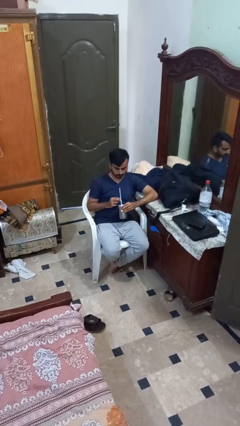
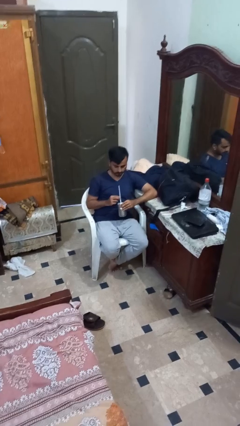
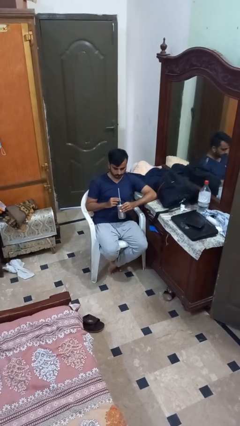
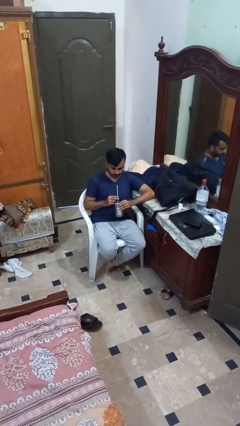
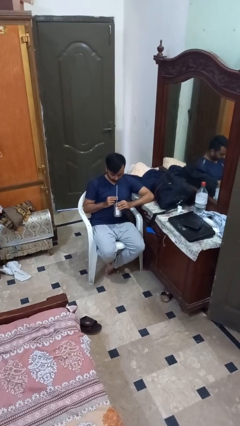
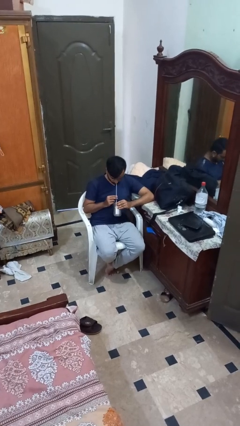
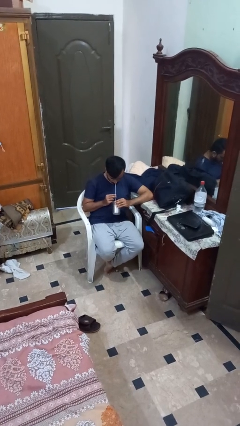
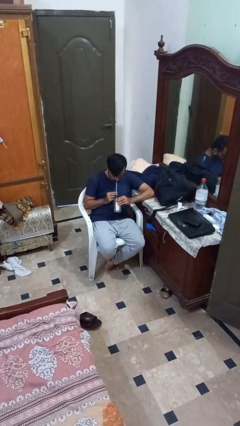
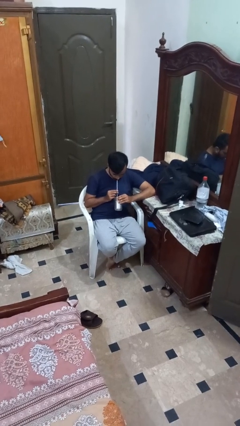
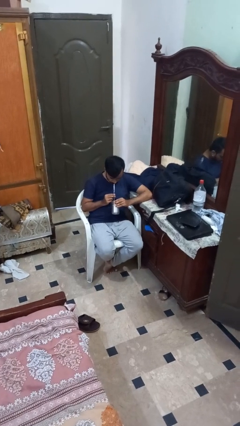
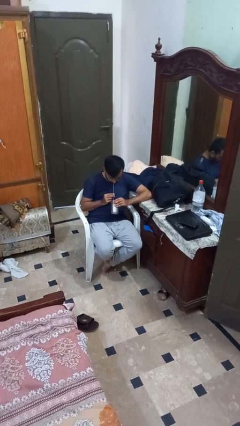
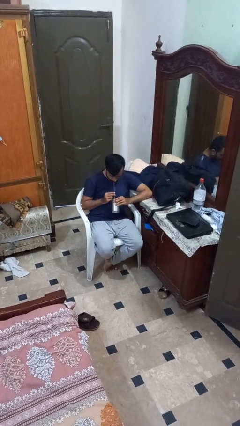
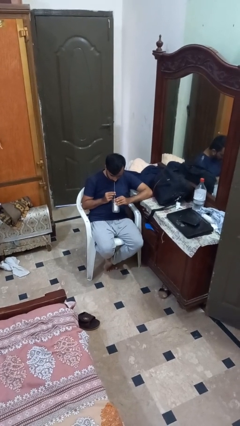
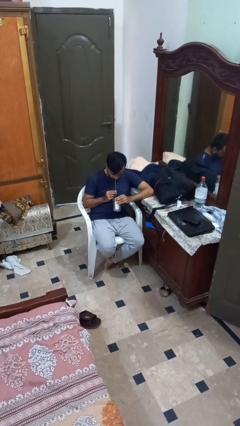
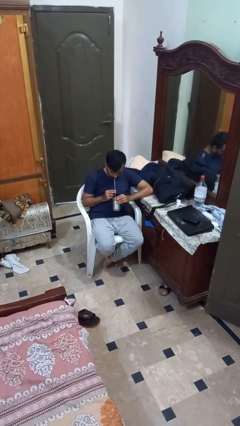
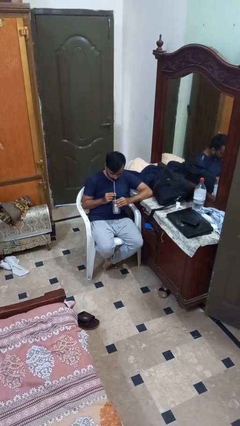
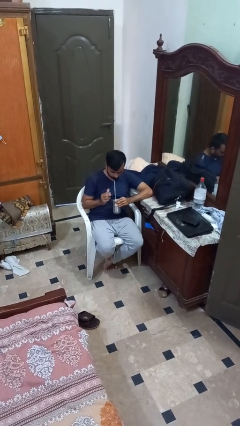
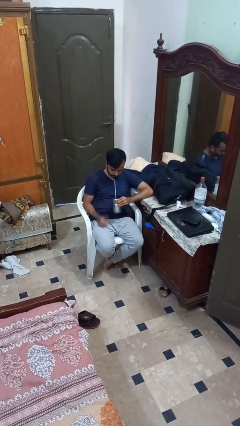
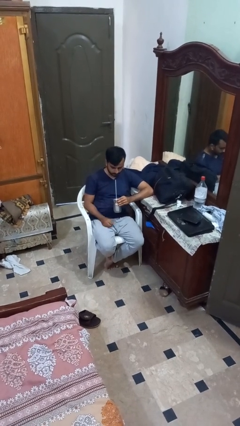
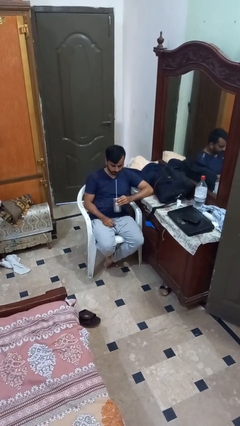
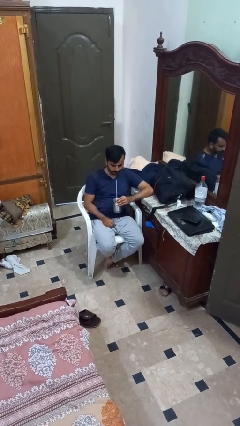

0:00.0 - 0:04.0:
person drinks from straw

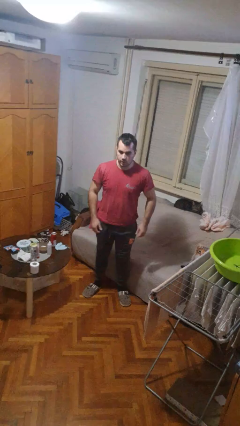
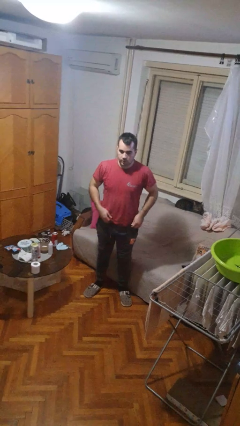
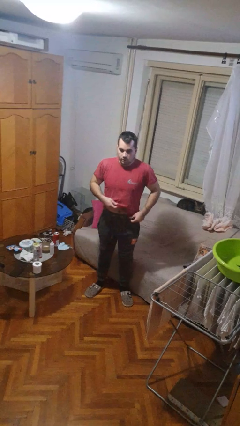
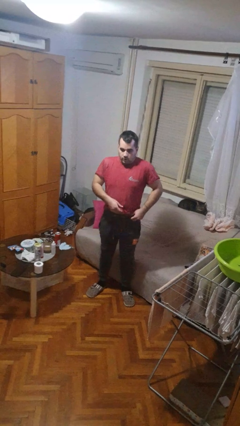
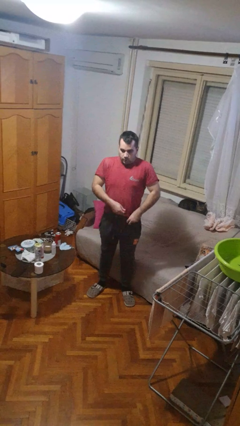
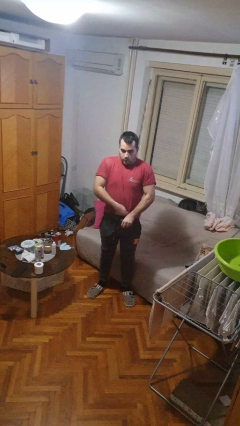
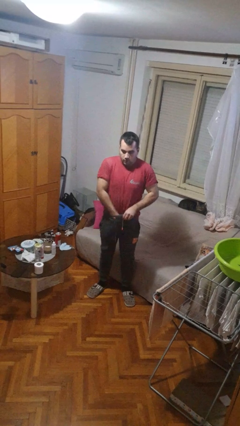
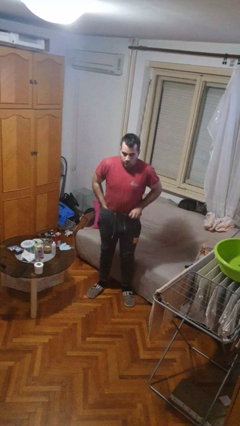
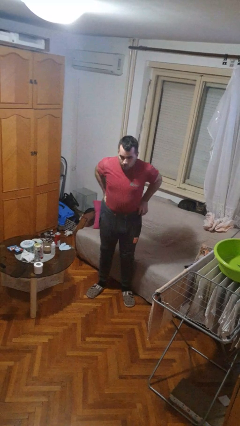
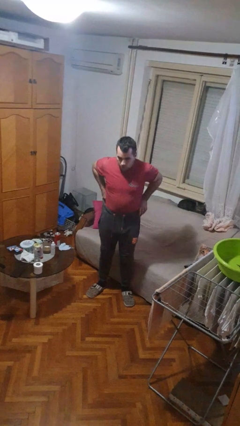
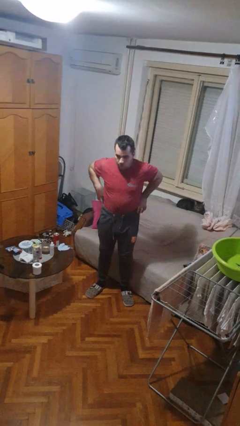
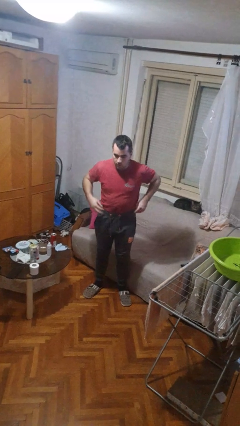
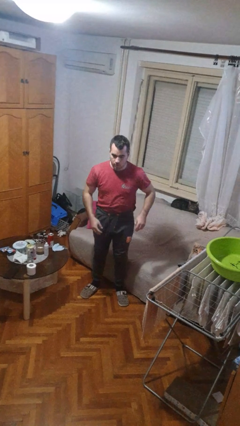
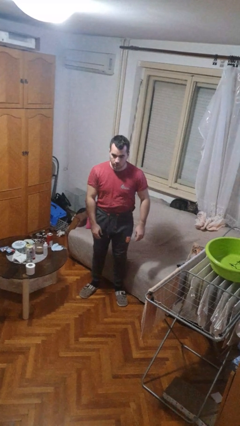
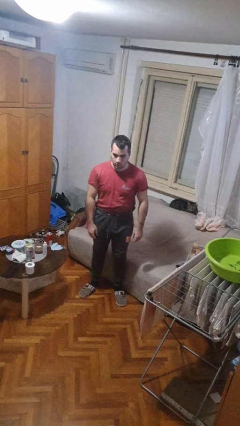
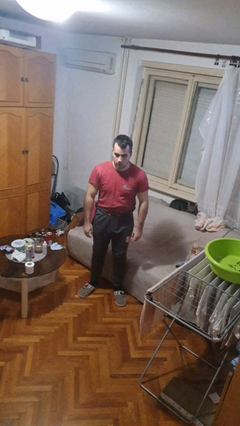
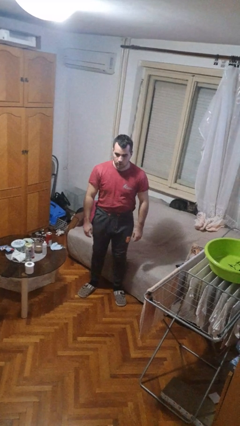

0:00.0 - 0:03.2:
person tucks in shirt

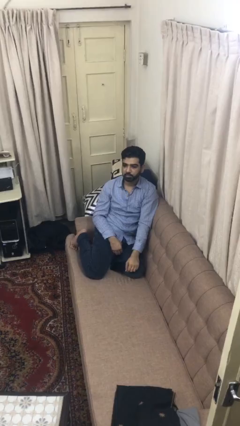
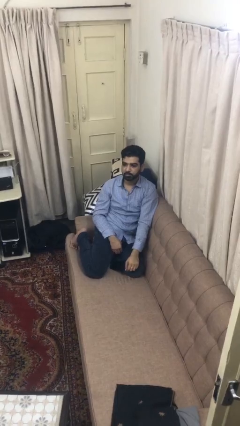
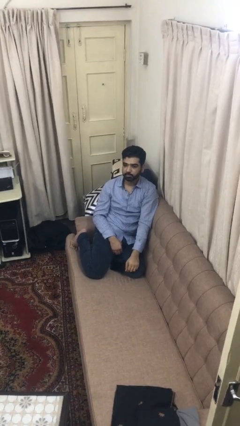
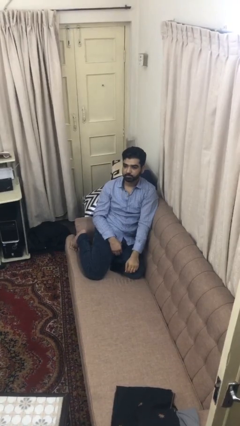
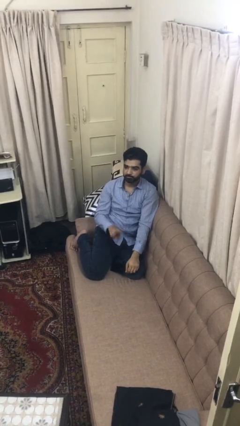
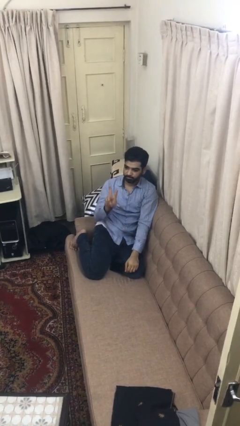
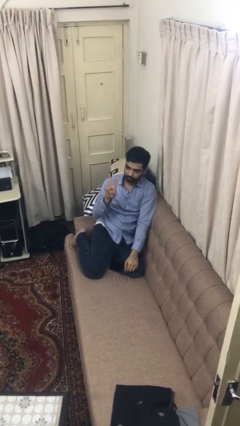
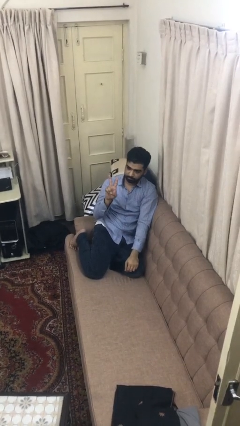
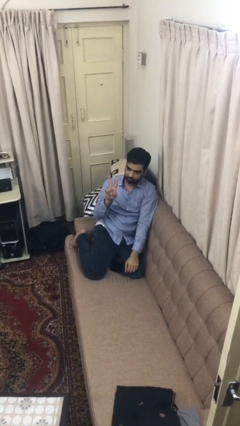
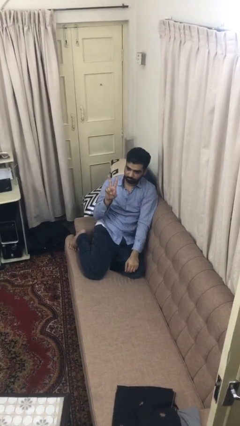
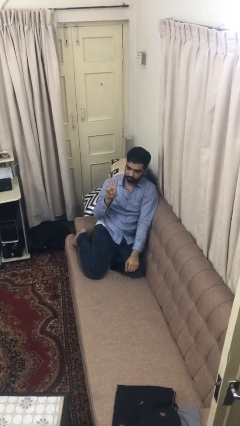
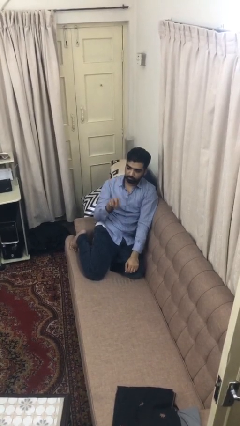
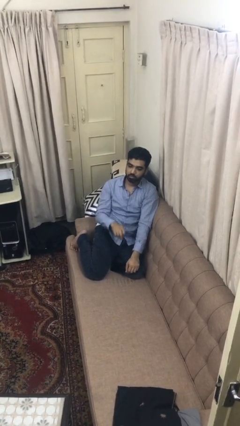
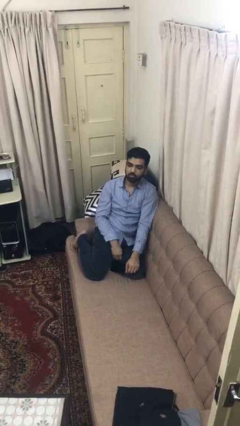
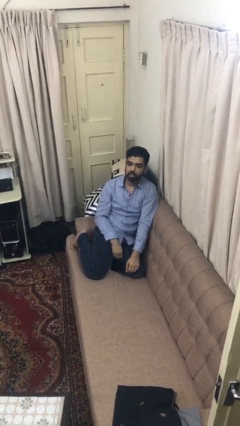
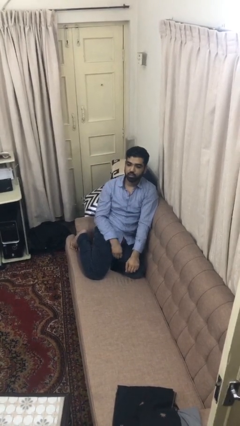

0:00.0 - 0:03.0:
person gestures peace

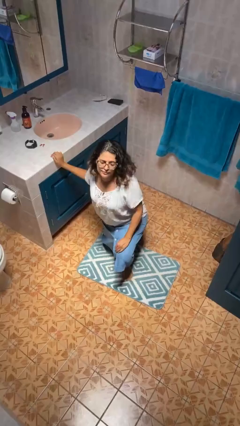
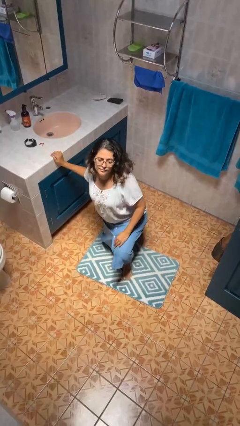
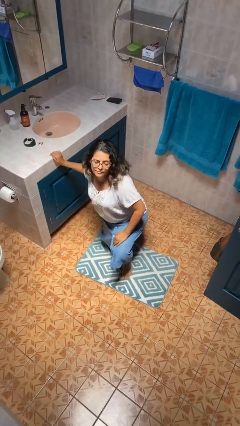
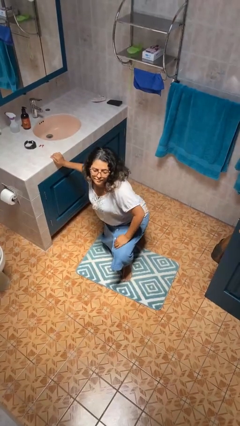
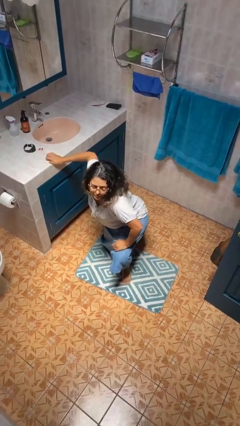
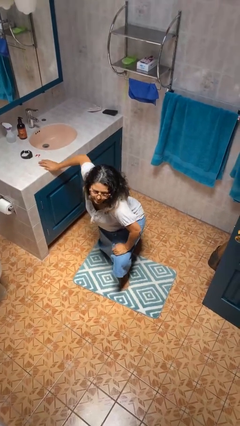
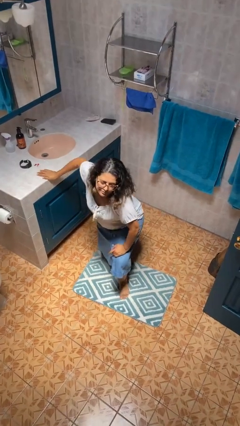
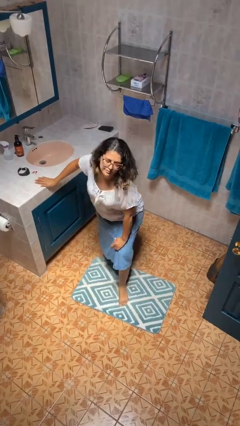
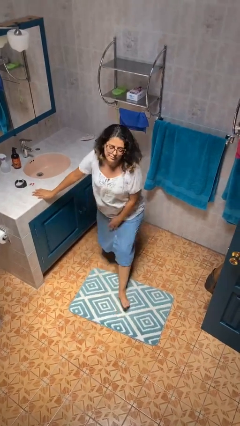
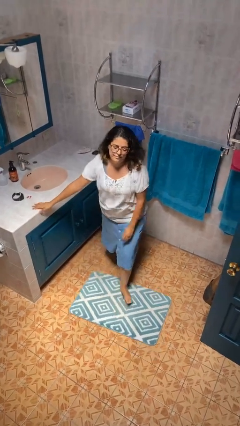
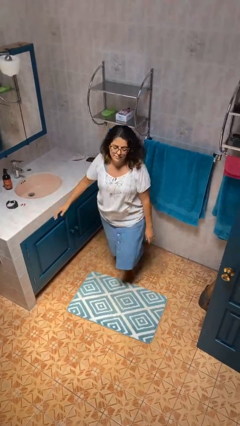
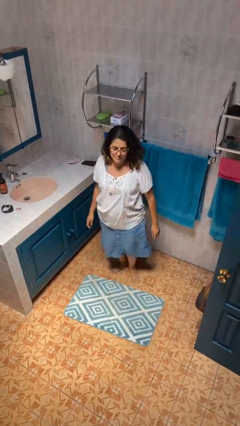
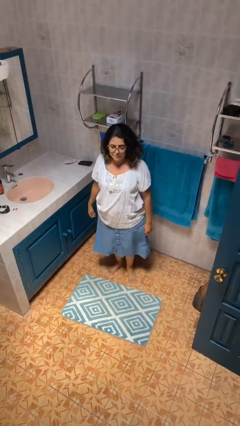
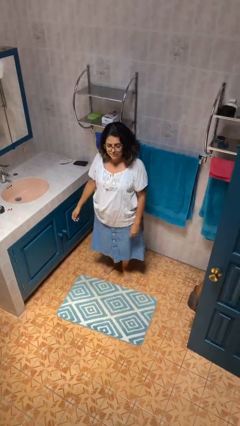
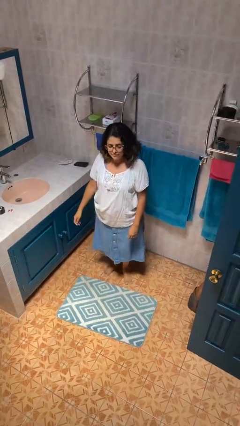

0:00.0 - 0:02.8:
person stands up from floor

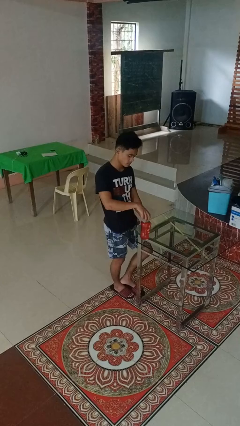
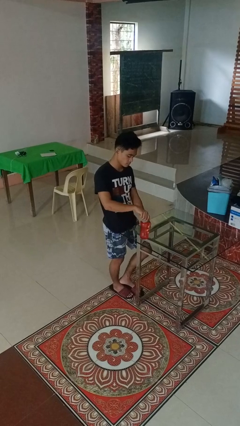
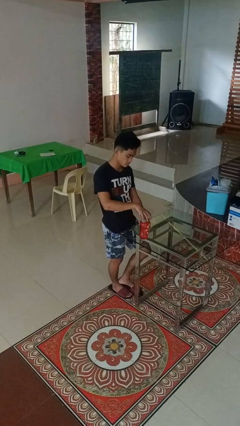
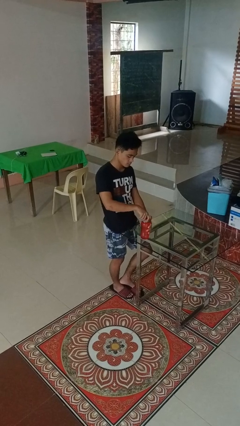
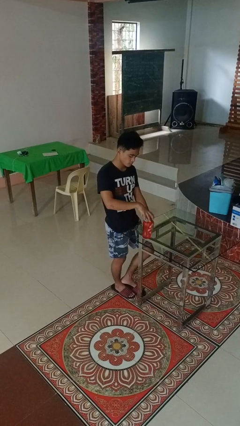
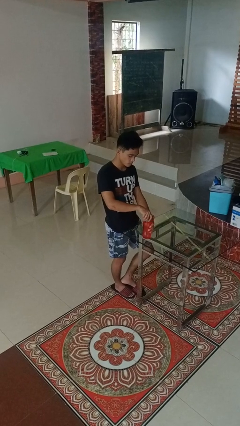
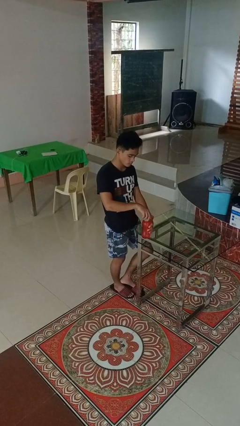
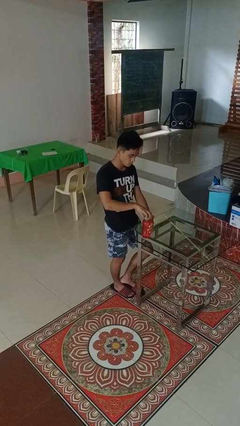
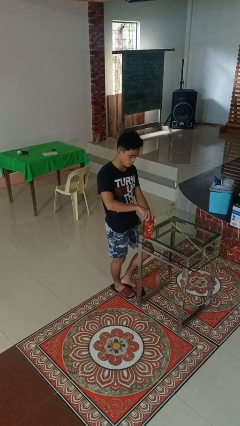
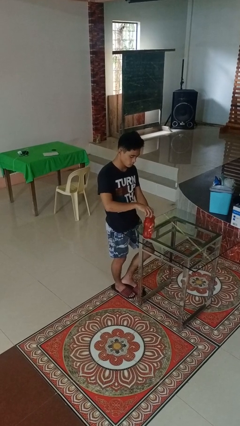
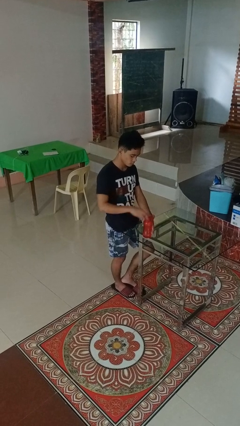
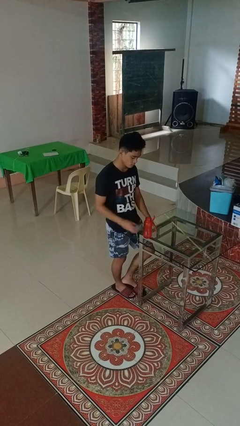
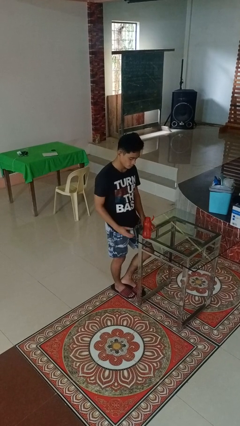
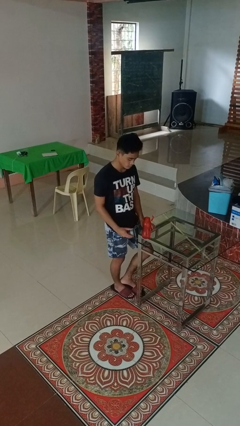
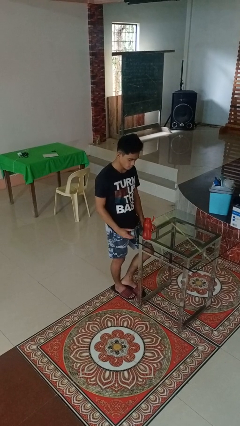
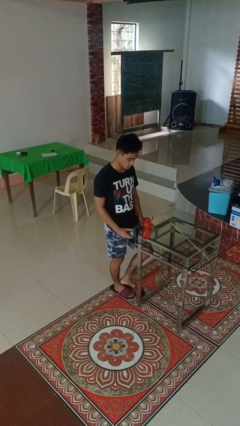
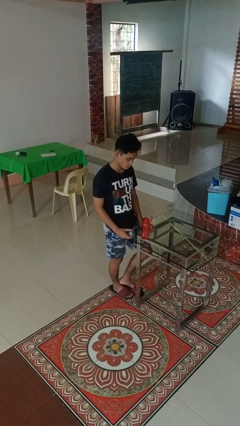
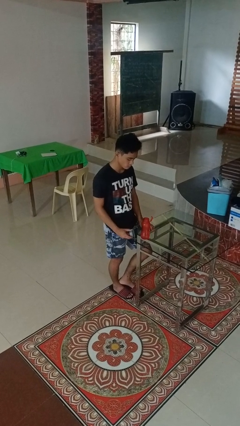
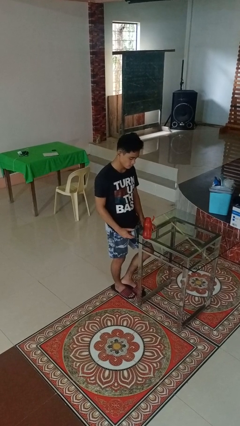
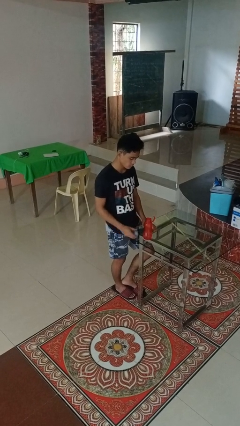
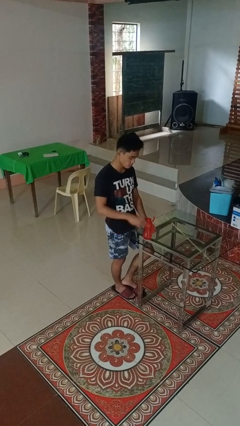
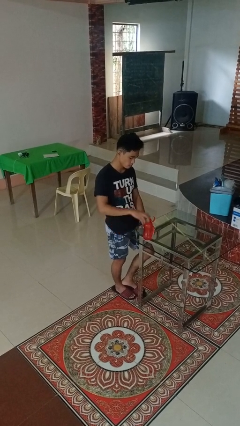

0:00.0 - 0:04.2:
person unscrews lid from bottle

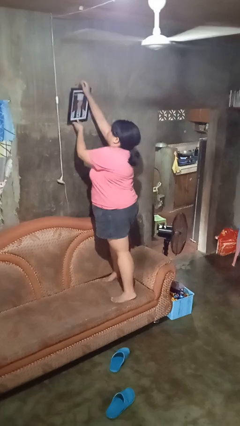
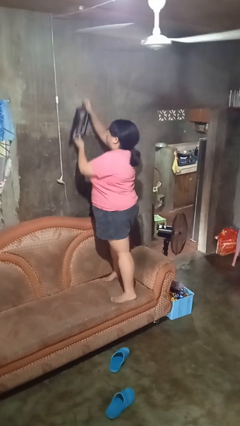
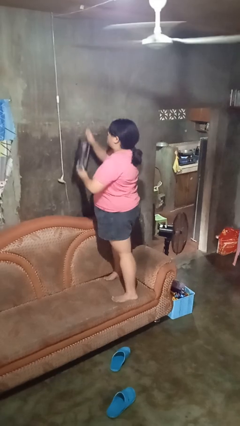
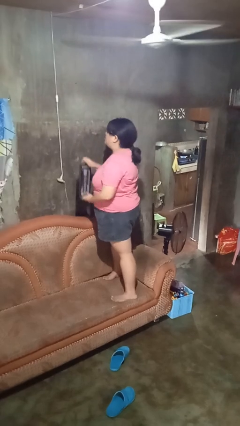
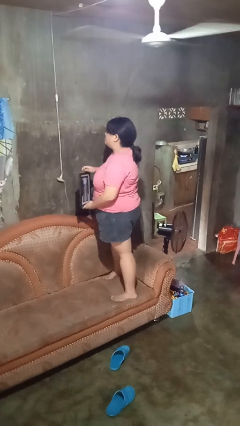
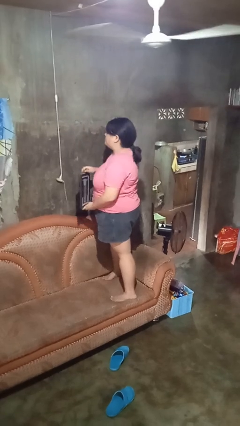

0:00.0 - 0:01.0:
person takes down picture frame
